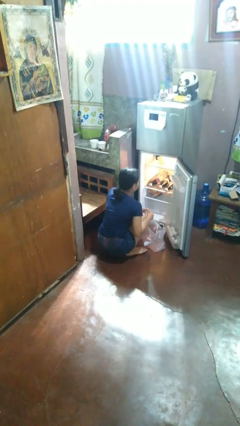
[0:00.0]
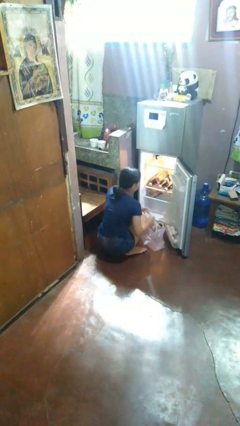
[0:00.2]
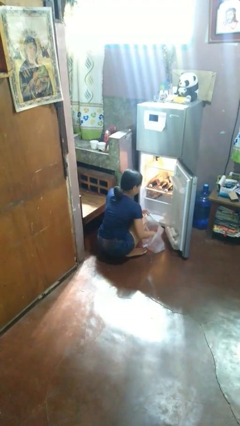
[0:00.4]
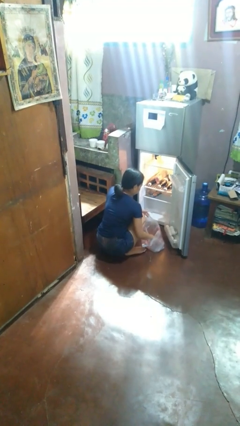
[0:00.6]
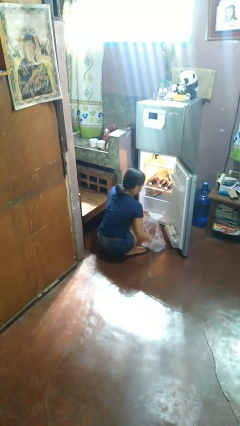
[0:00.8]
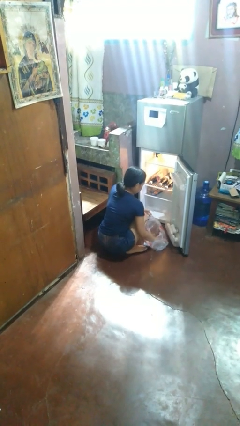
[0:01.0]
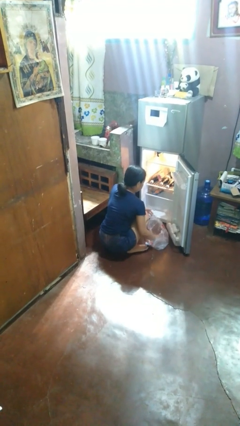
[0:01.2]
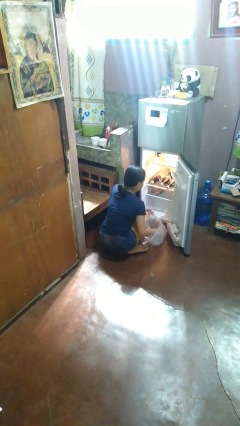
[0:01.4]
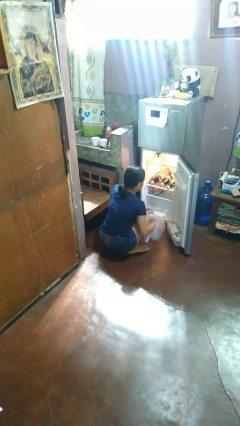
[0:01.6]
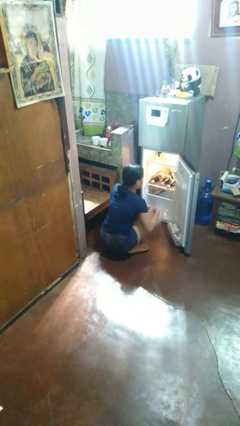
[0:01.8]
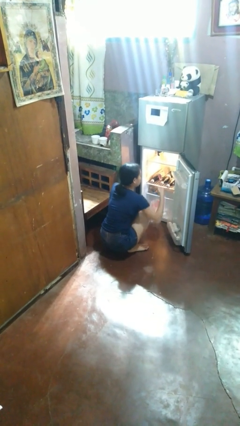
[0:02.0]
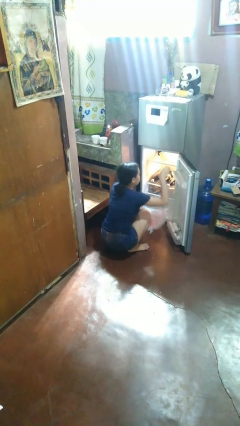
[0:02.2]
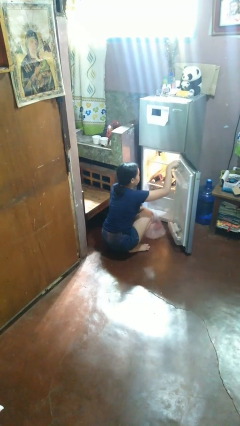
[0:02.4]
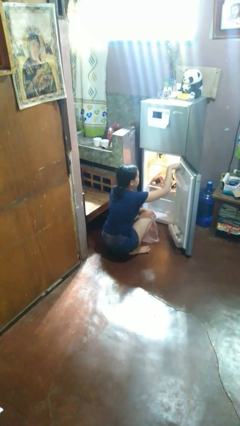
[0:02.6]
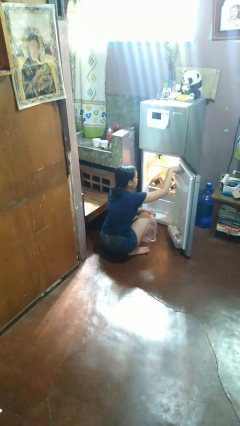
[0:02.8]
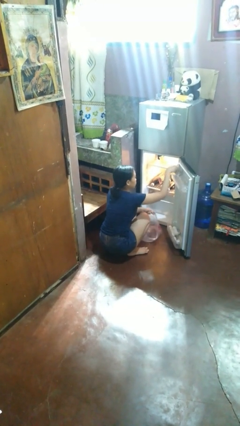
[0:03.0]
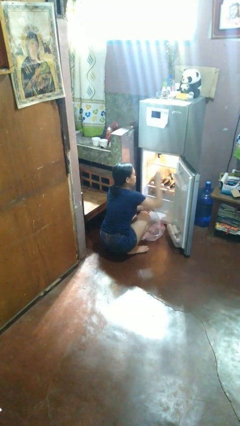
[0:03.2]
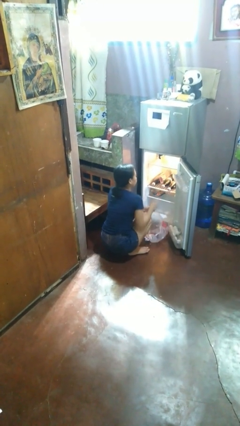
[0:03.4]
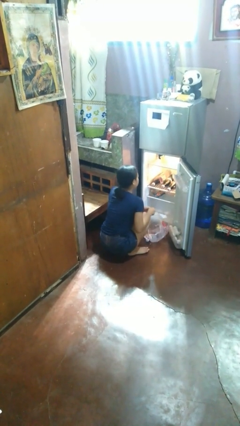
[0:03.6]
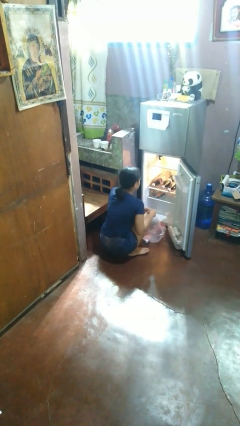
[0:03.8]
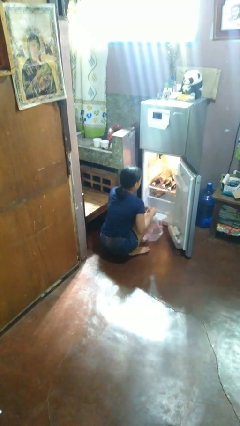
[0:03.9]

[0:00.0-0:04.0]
person loads groceries into refrigerator

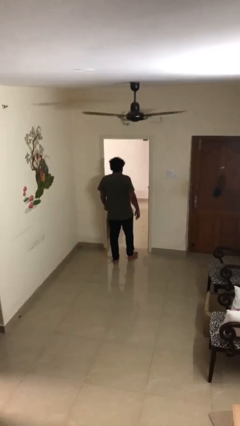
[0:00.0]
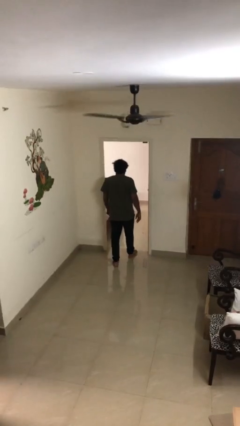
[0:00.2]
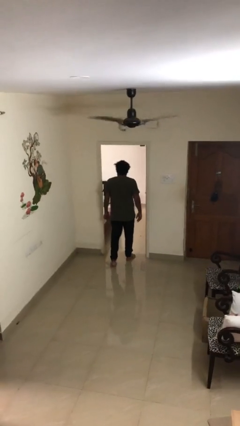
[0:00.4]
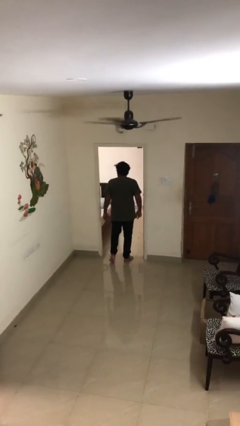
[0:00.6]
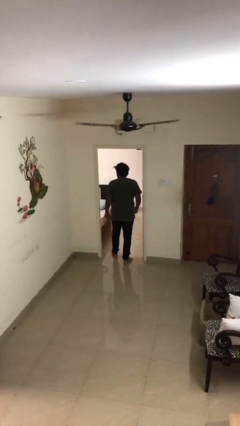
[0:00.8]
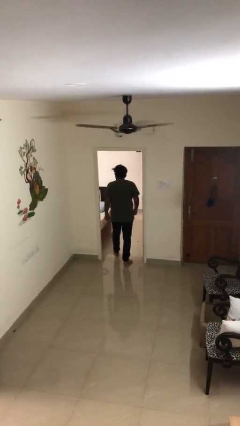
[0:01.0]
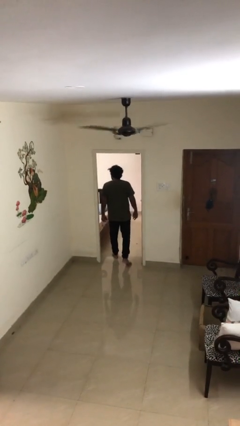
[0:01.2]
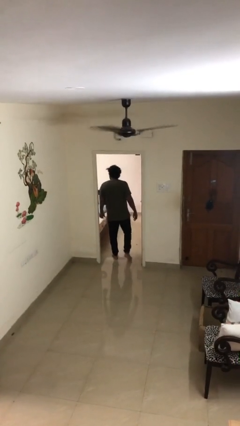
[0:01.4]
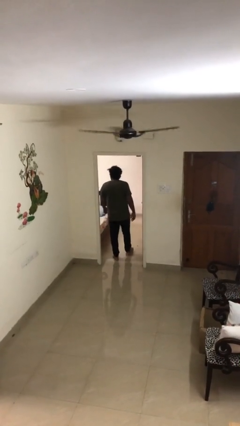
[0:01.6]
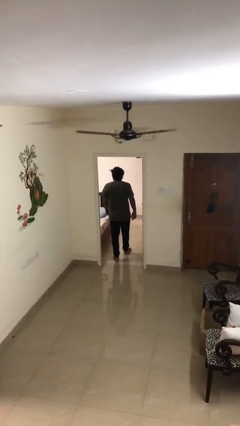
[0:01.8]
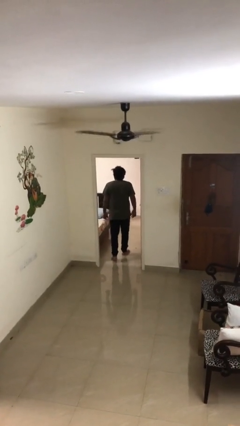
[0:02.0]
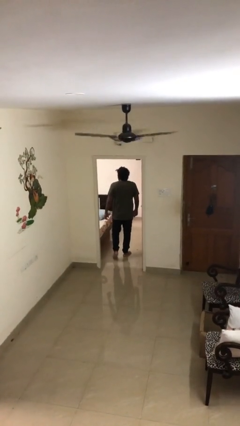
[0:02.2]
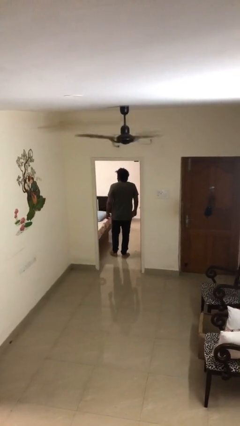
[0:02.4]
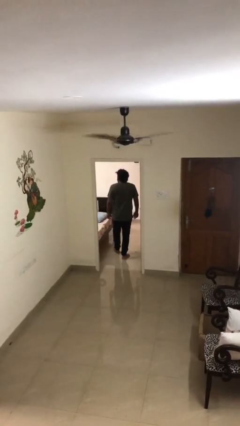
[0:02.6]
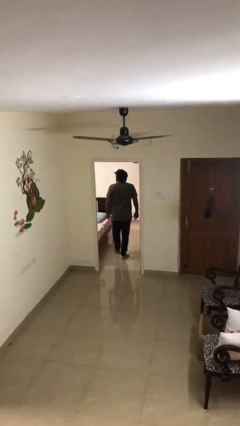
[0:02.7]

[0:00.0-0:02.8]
person exits scene through structure

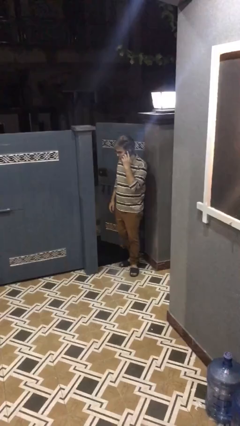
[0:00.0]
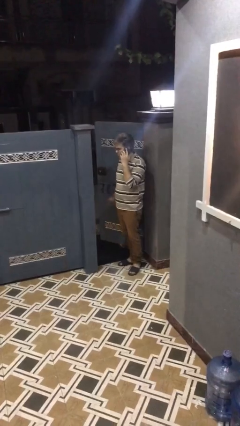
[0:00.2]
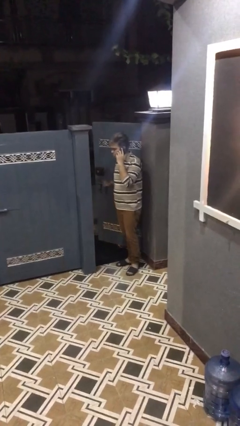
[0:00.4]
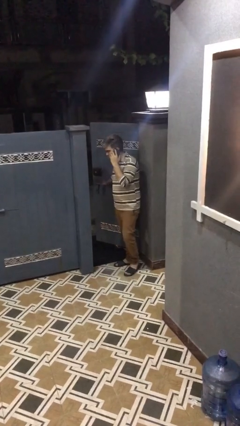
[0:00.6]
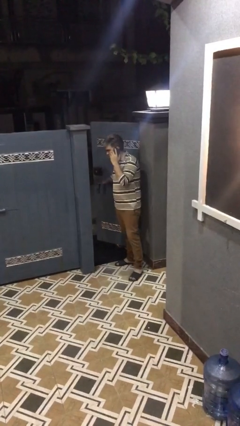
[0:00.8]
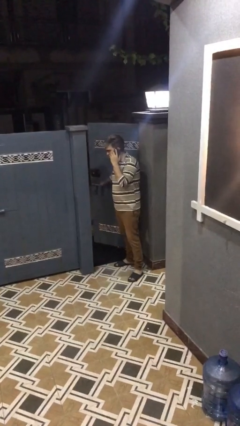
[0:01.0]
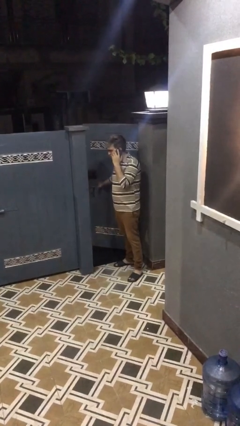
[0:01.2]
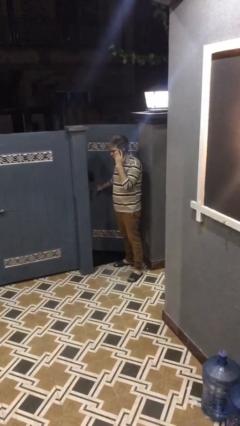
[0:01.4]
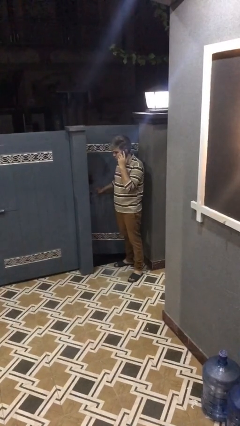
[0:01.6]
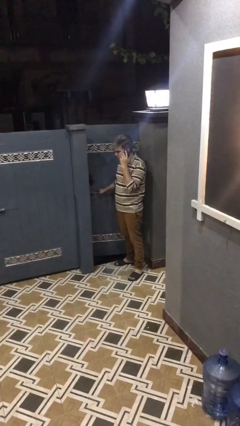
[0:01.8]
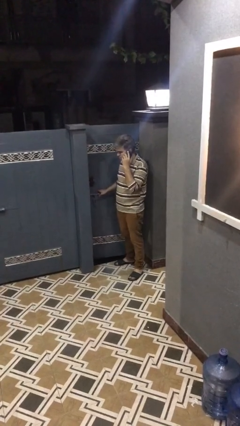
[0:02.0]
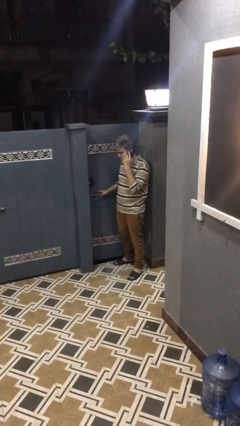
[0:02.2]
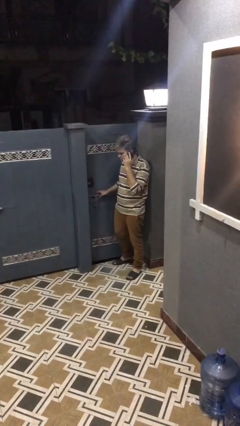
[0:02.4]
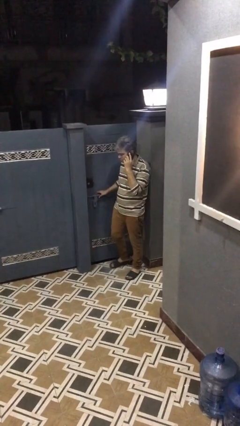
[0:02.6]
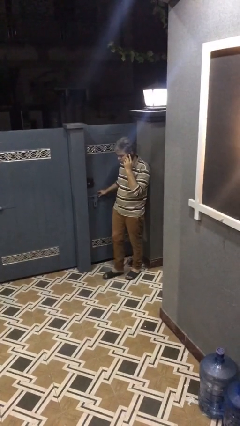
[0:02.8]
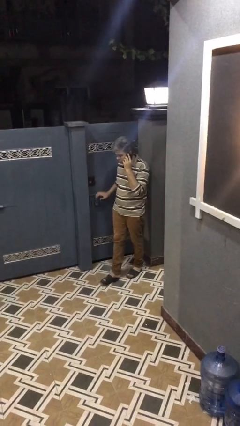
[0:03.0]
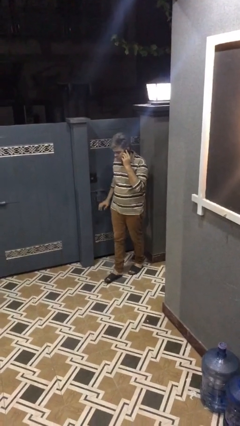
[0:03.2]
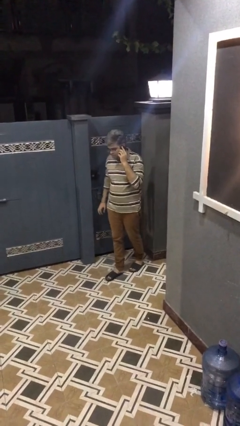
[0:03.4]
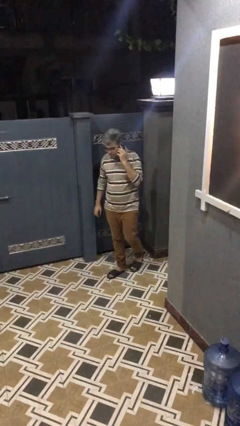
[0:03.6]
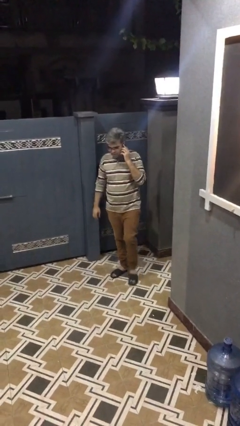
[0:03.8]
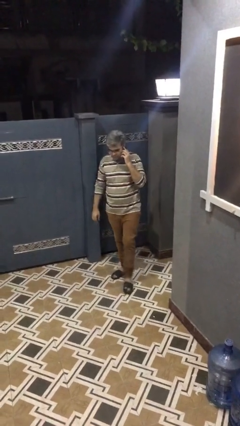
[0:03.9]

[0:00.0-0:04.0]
person closes facility door

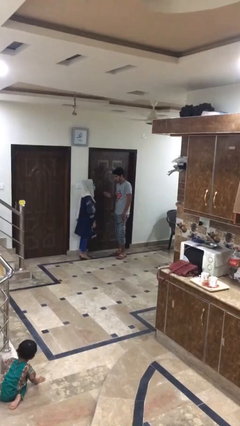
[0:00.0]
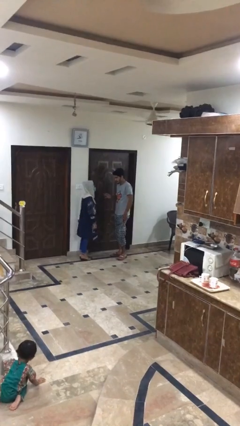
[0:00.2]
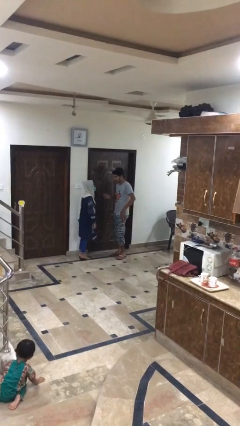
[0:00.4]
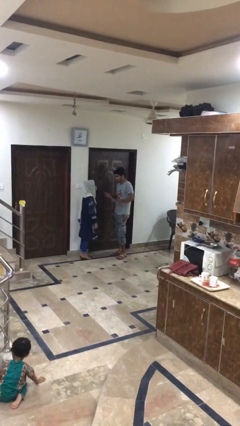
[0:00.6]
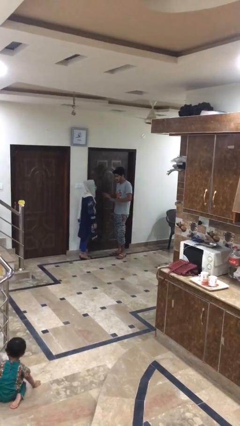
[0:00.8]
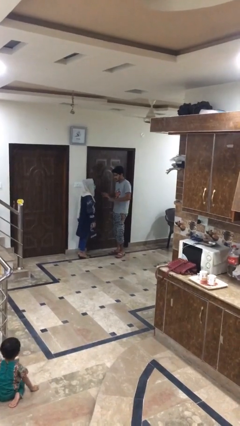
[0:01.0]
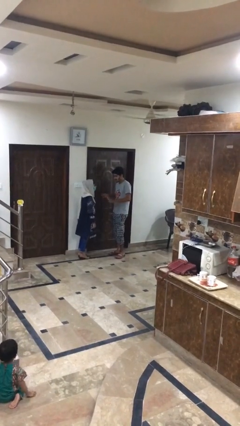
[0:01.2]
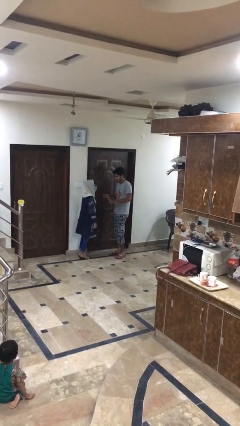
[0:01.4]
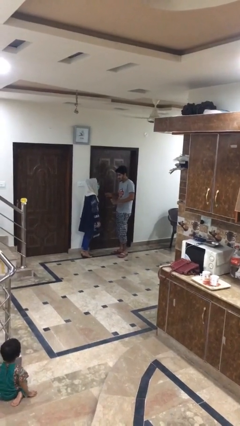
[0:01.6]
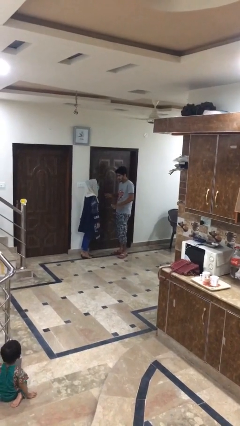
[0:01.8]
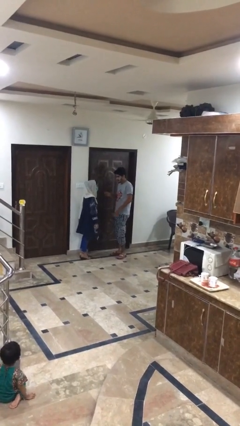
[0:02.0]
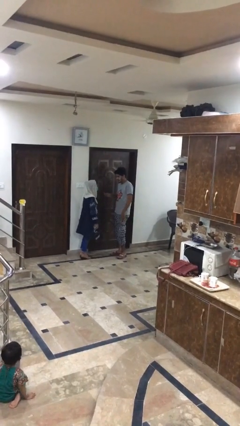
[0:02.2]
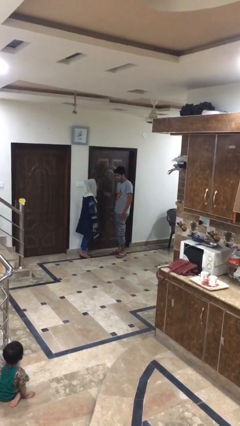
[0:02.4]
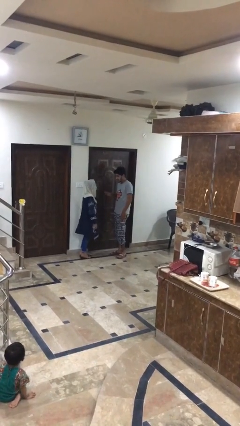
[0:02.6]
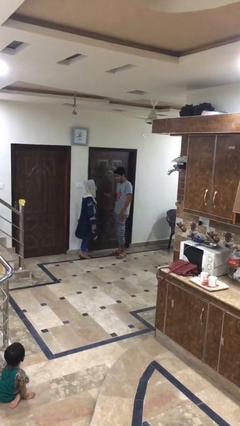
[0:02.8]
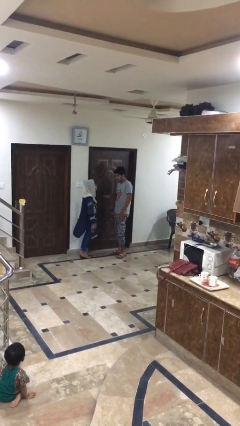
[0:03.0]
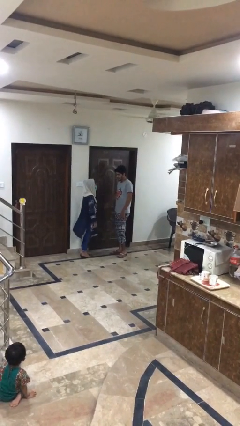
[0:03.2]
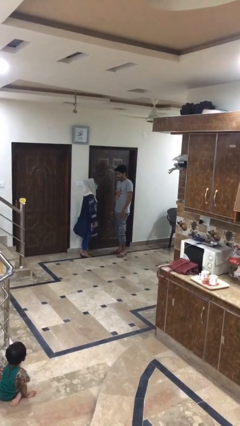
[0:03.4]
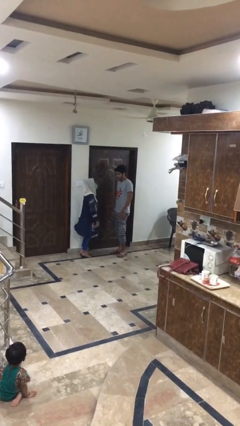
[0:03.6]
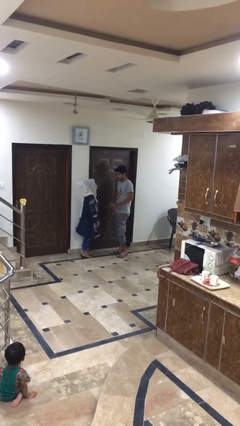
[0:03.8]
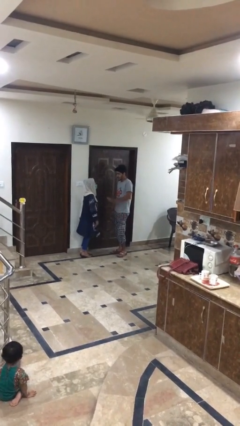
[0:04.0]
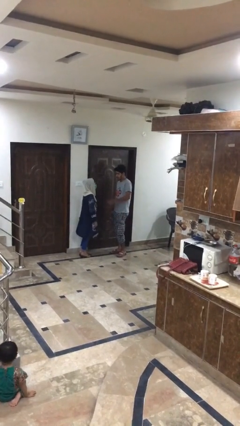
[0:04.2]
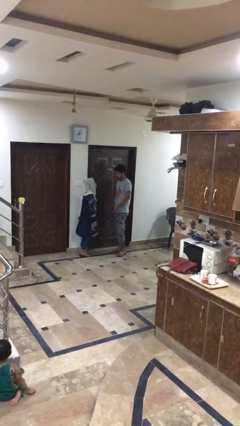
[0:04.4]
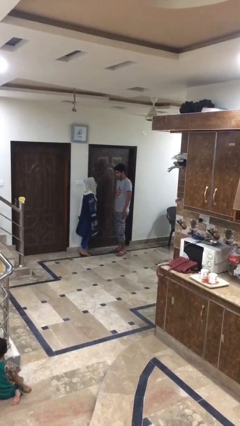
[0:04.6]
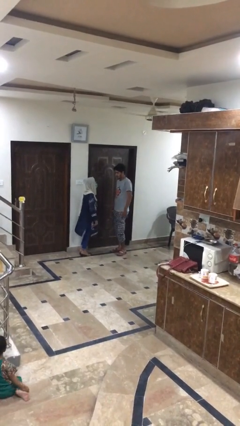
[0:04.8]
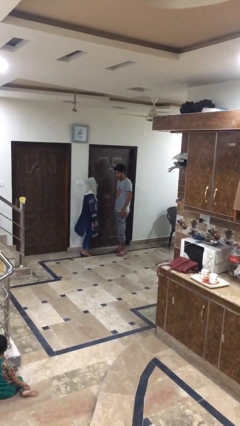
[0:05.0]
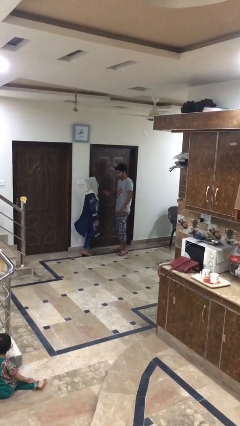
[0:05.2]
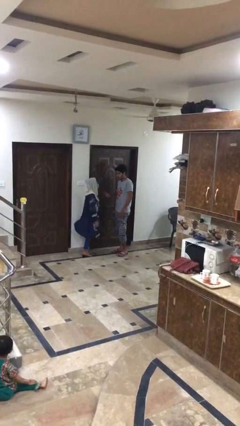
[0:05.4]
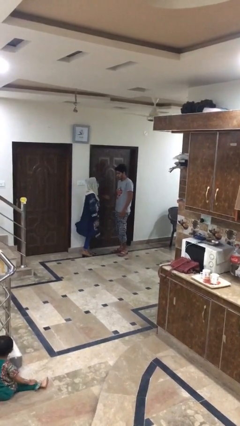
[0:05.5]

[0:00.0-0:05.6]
person talks to person

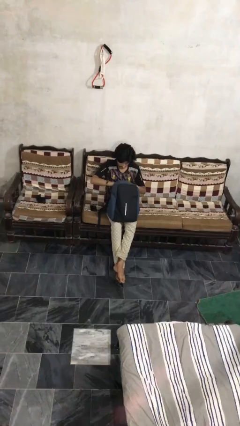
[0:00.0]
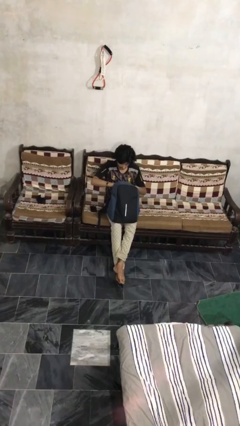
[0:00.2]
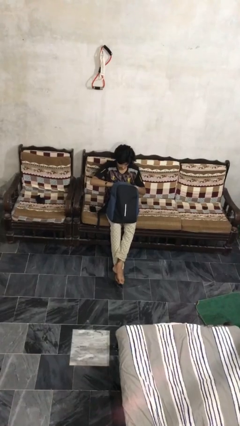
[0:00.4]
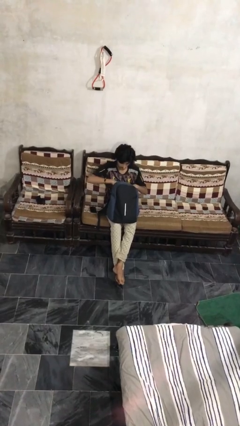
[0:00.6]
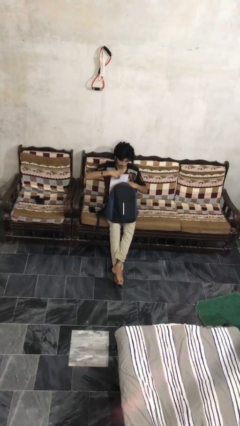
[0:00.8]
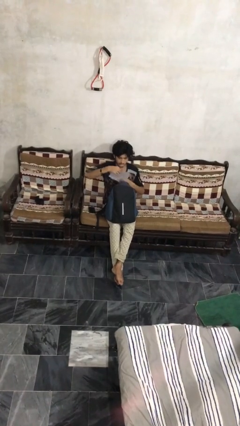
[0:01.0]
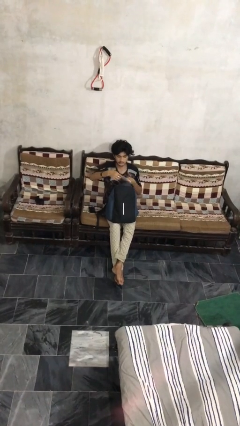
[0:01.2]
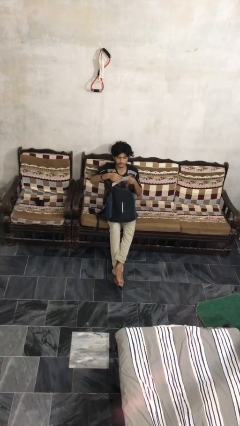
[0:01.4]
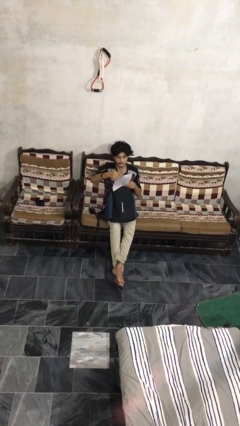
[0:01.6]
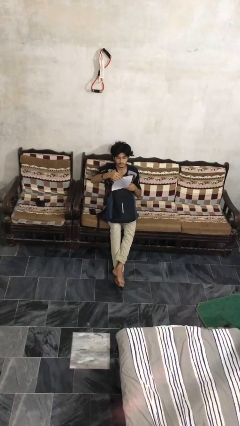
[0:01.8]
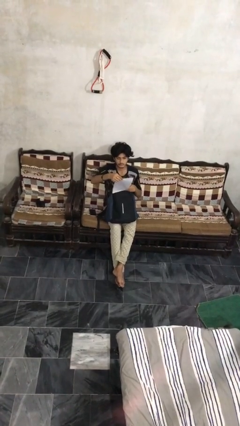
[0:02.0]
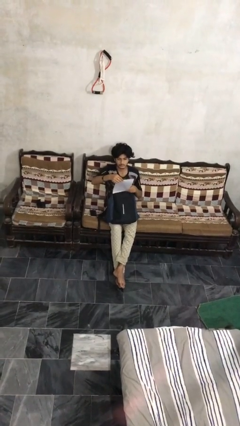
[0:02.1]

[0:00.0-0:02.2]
person takes object from backpack
